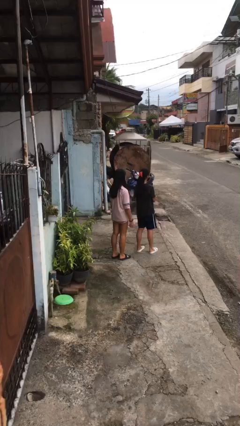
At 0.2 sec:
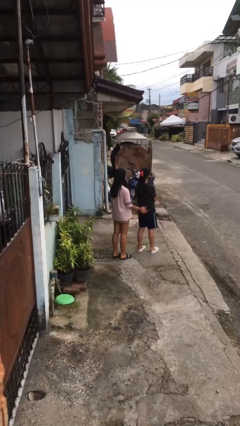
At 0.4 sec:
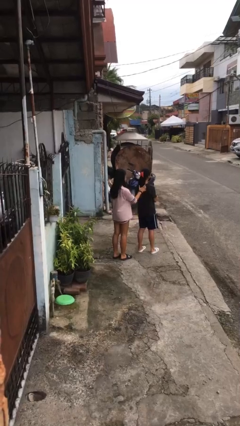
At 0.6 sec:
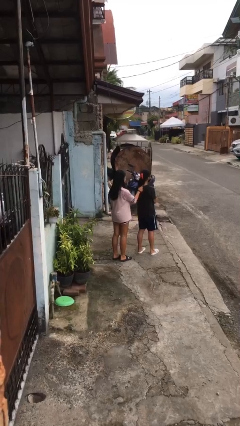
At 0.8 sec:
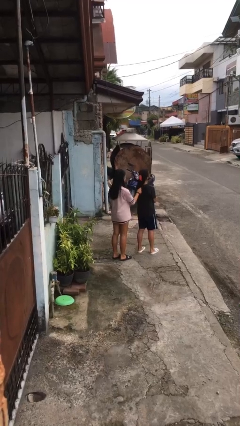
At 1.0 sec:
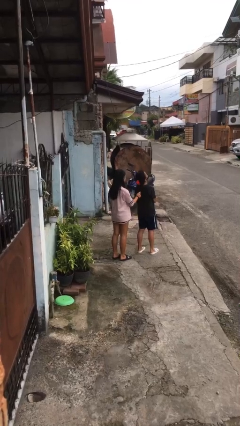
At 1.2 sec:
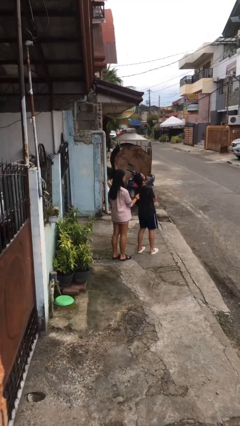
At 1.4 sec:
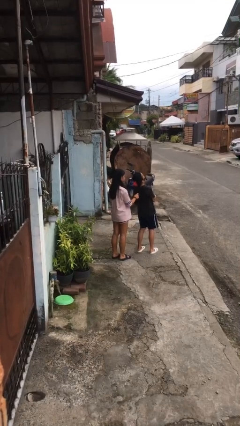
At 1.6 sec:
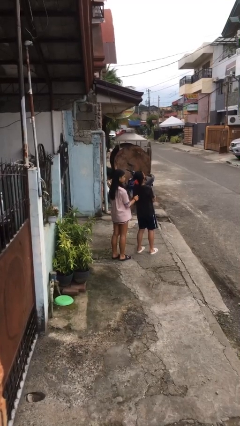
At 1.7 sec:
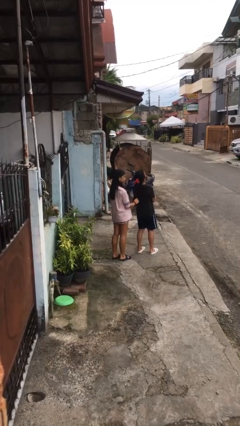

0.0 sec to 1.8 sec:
person grabs person by hair

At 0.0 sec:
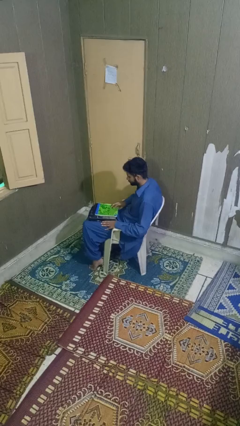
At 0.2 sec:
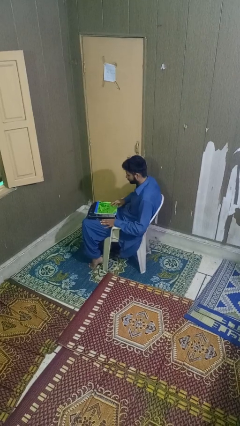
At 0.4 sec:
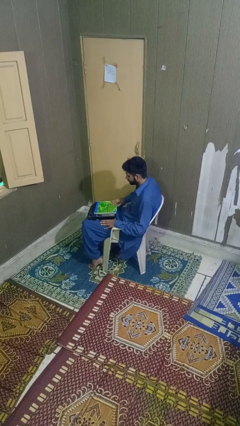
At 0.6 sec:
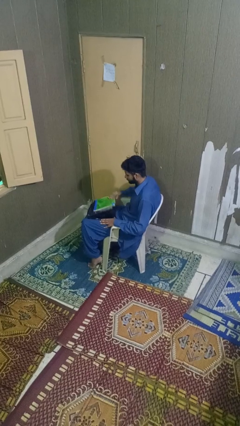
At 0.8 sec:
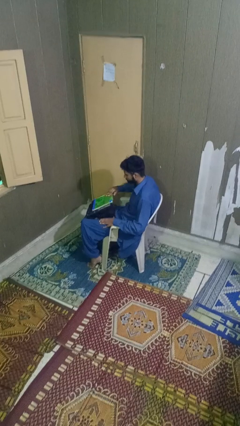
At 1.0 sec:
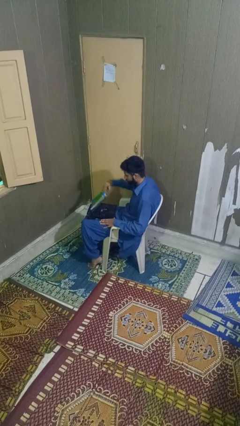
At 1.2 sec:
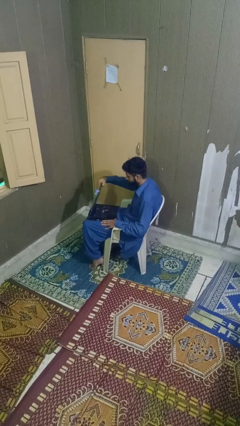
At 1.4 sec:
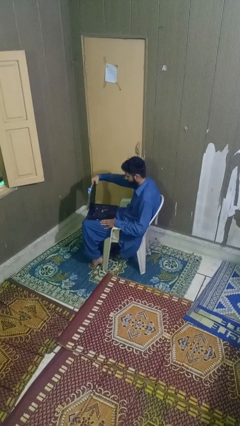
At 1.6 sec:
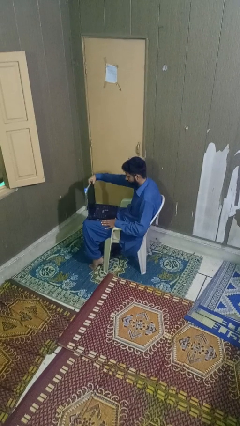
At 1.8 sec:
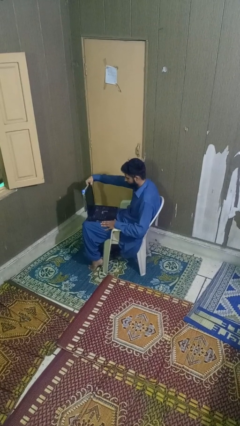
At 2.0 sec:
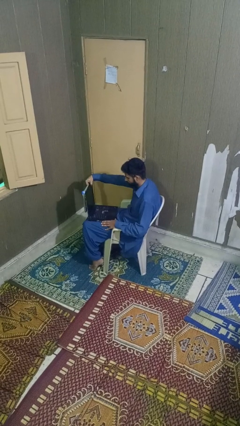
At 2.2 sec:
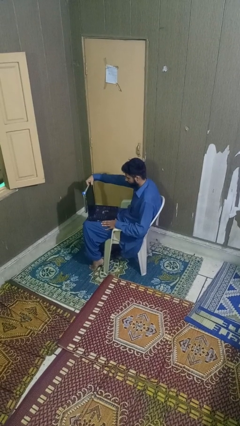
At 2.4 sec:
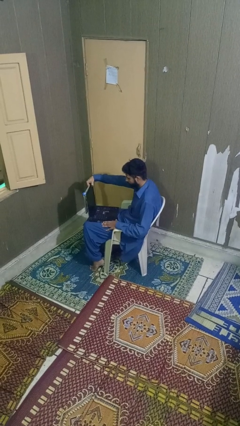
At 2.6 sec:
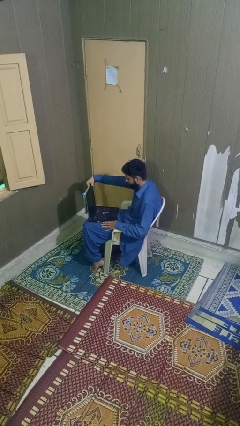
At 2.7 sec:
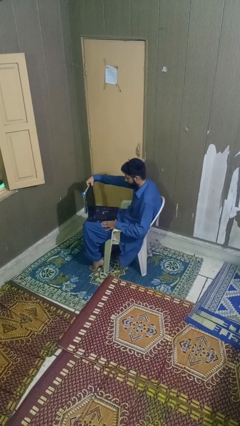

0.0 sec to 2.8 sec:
person opens laptop

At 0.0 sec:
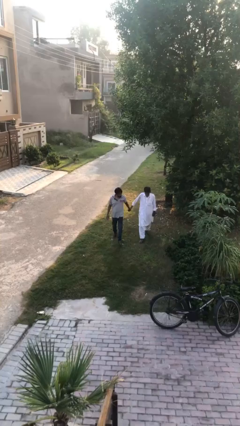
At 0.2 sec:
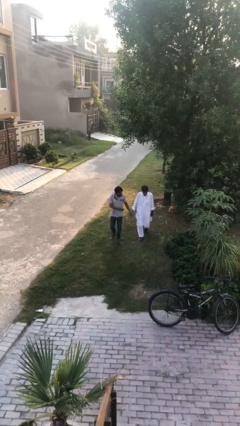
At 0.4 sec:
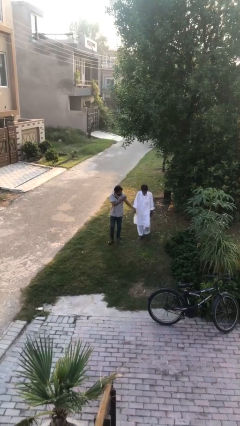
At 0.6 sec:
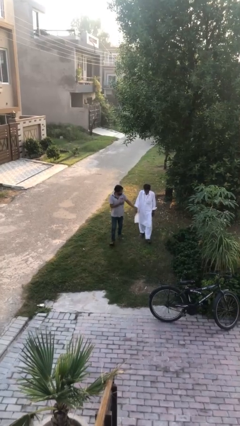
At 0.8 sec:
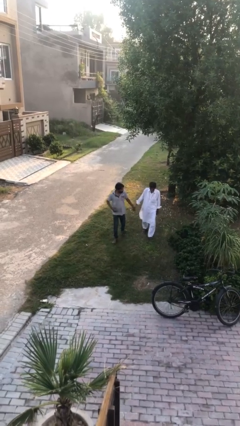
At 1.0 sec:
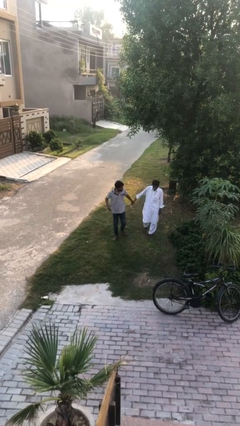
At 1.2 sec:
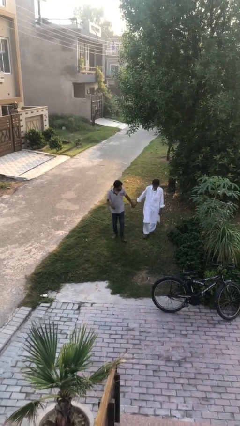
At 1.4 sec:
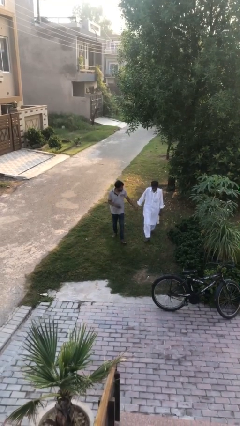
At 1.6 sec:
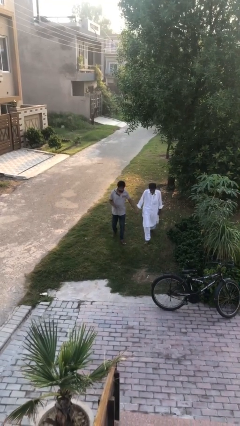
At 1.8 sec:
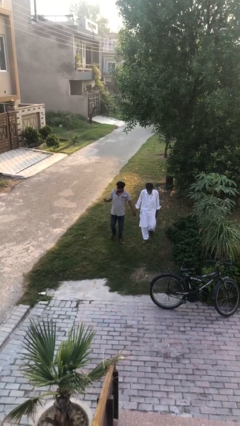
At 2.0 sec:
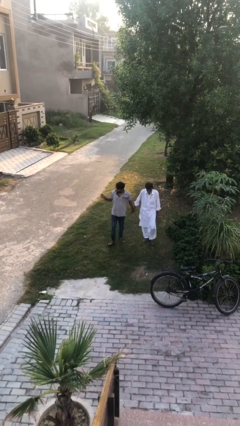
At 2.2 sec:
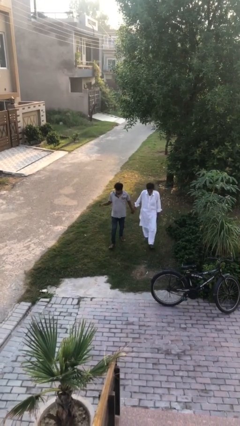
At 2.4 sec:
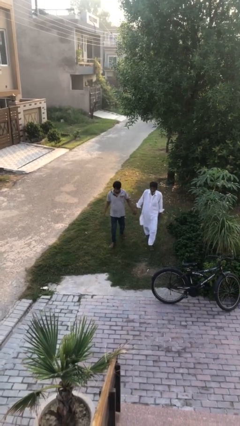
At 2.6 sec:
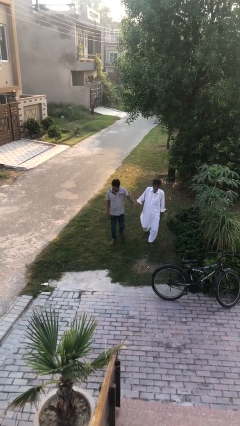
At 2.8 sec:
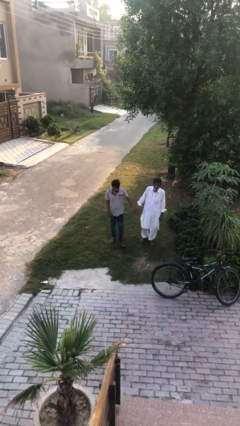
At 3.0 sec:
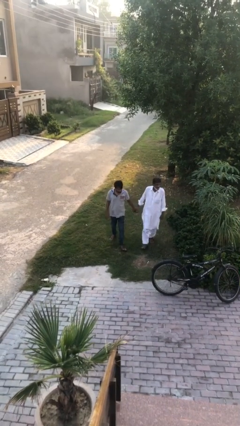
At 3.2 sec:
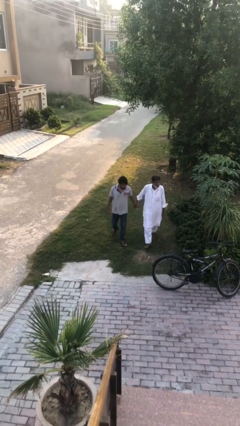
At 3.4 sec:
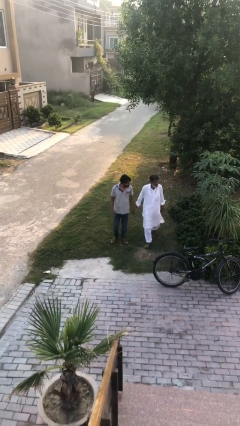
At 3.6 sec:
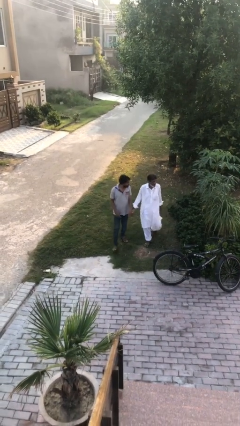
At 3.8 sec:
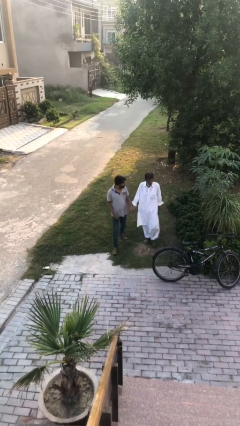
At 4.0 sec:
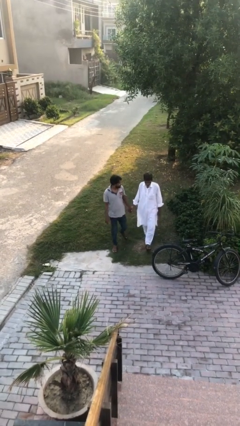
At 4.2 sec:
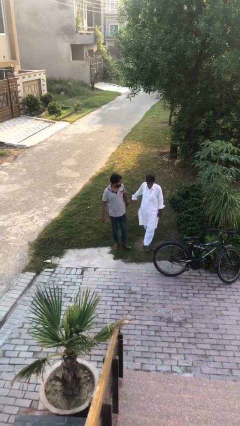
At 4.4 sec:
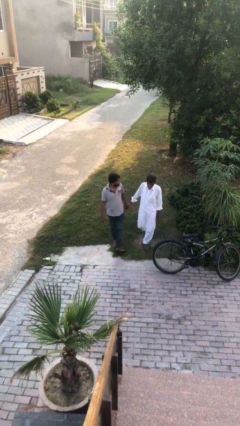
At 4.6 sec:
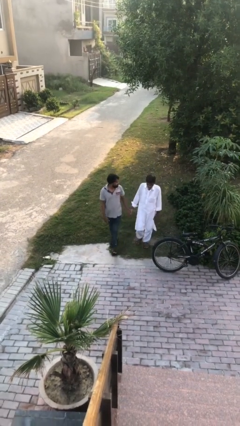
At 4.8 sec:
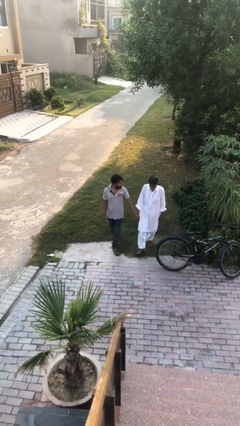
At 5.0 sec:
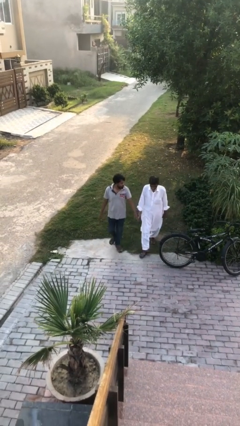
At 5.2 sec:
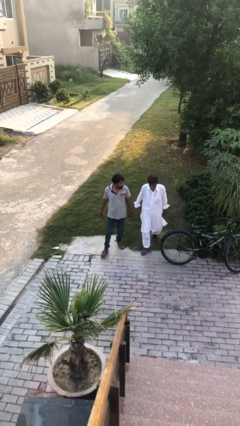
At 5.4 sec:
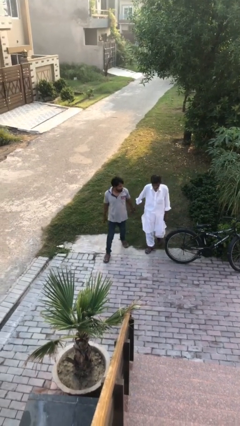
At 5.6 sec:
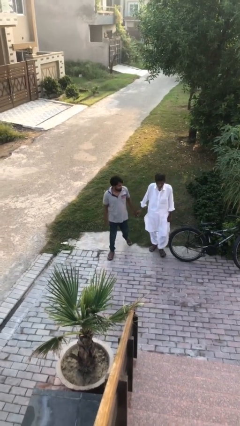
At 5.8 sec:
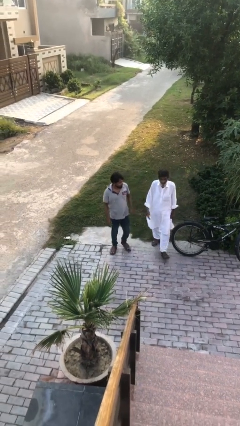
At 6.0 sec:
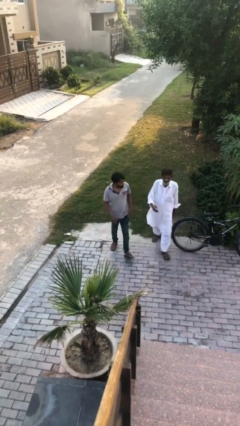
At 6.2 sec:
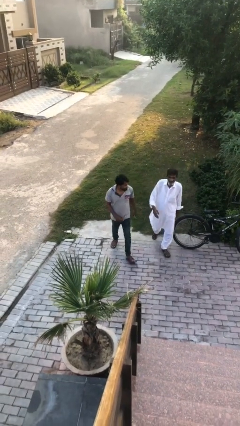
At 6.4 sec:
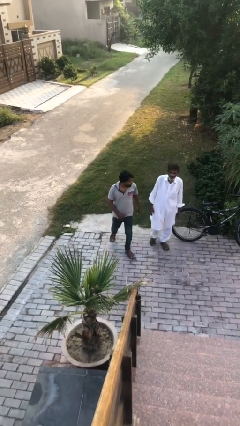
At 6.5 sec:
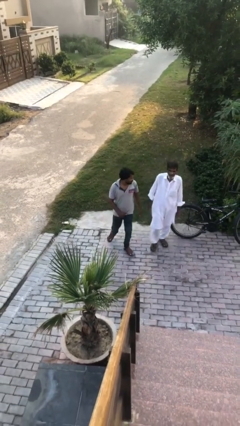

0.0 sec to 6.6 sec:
person holds hand

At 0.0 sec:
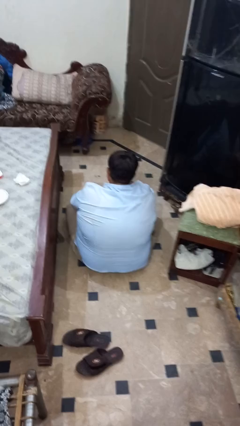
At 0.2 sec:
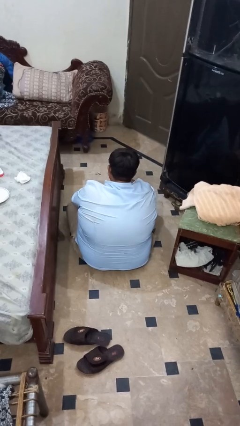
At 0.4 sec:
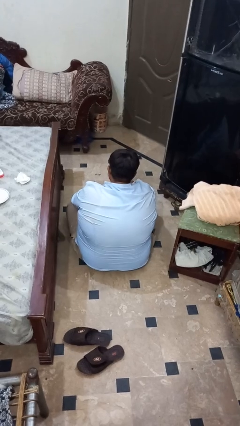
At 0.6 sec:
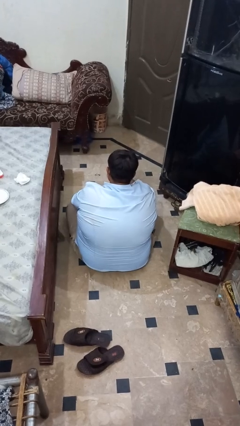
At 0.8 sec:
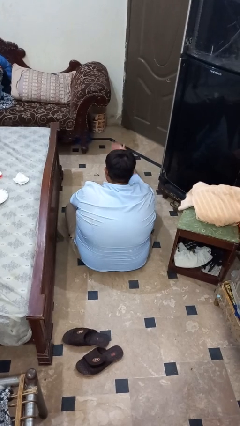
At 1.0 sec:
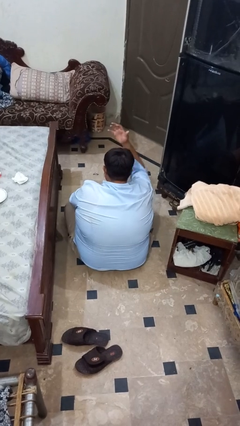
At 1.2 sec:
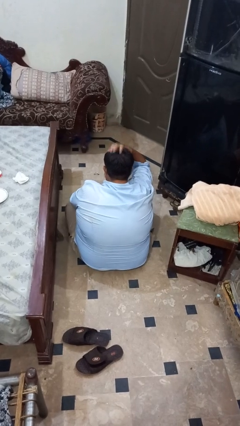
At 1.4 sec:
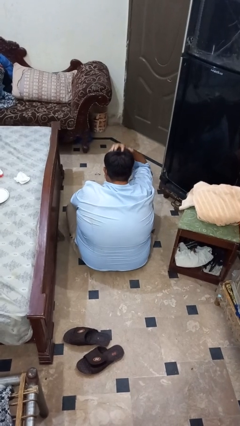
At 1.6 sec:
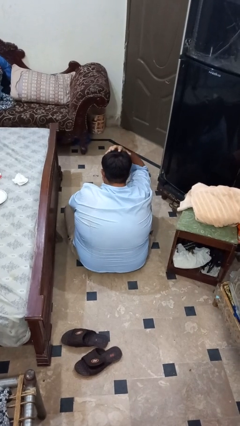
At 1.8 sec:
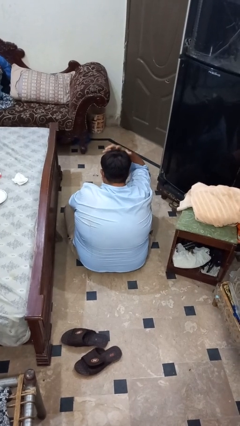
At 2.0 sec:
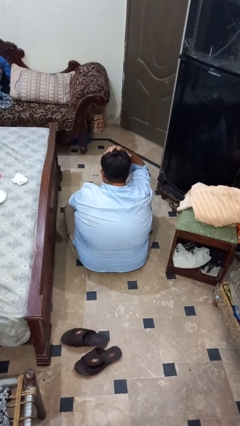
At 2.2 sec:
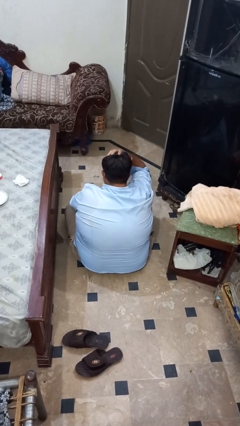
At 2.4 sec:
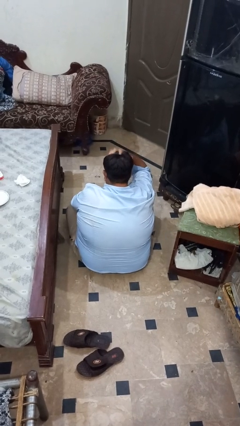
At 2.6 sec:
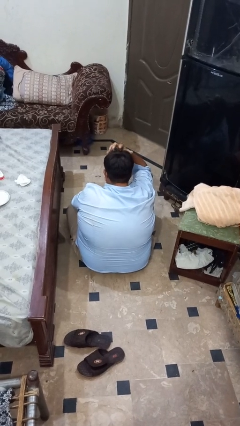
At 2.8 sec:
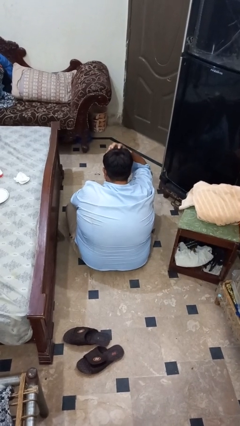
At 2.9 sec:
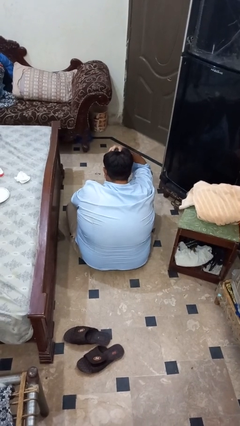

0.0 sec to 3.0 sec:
person pats head

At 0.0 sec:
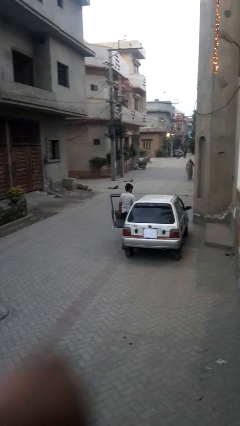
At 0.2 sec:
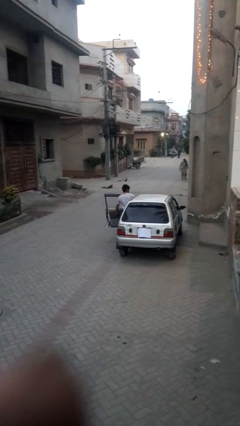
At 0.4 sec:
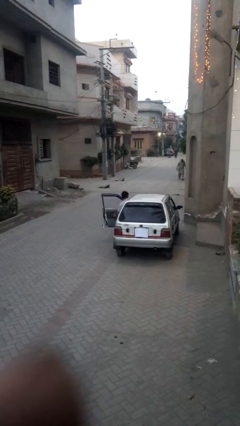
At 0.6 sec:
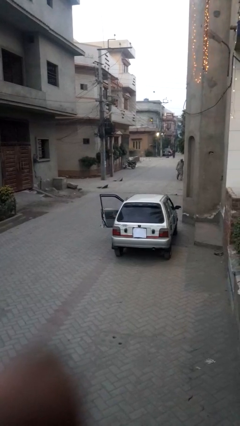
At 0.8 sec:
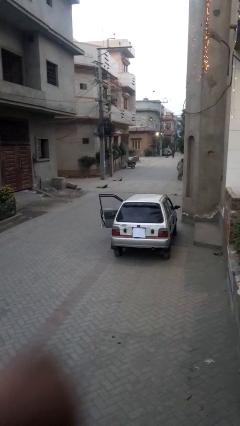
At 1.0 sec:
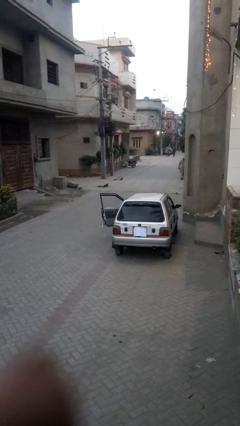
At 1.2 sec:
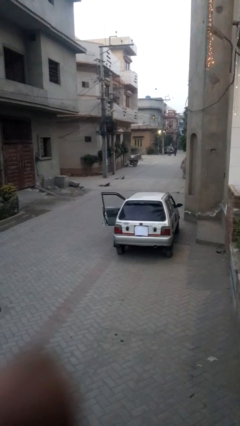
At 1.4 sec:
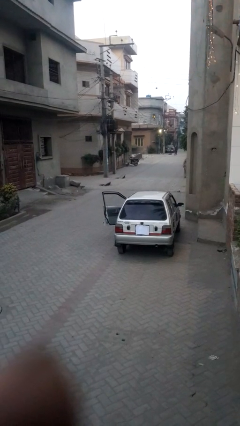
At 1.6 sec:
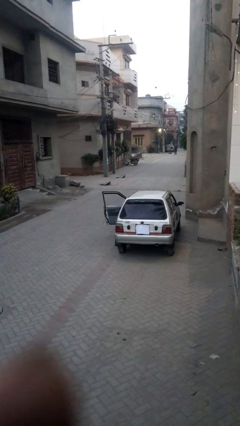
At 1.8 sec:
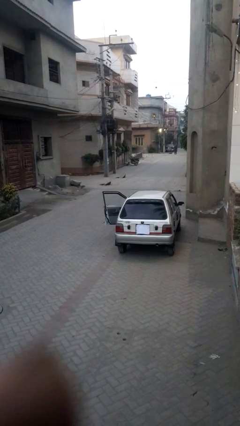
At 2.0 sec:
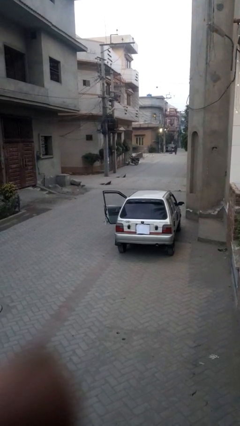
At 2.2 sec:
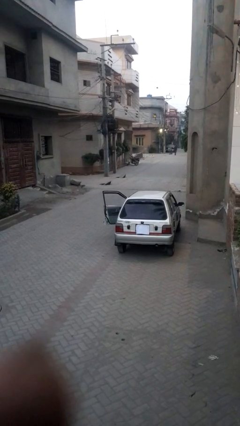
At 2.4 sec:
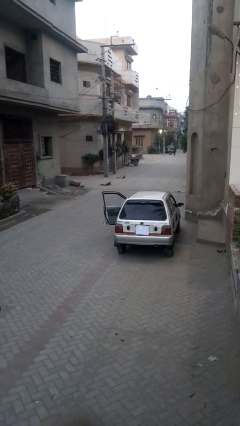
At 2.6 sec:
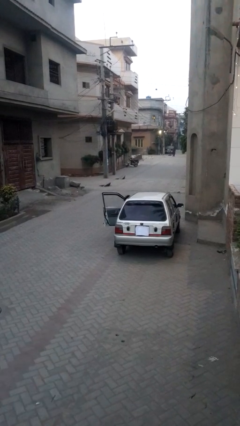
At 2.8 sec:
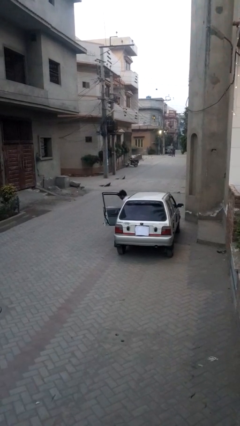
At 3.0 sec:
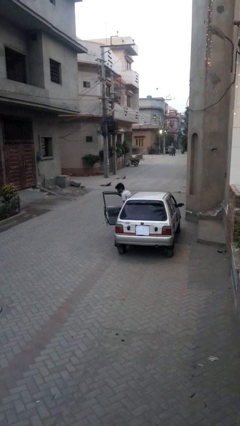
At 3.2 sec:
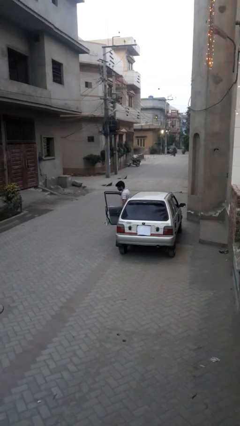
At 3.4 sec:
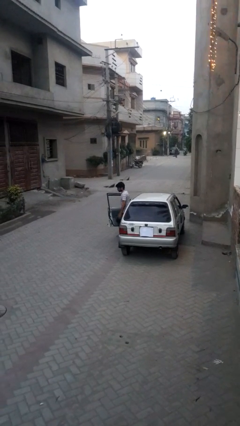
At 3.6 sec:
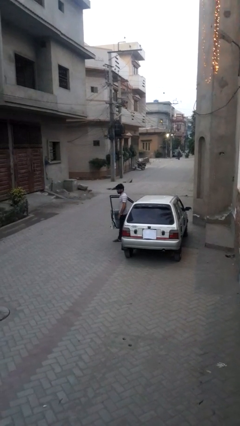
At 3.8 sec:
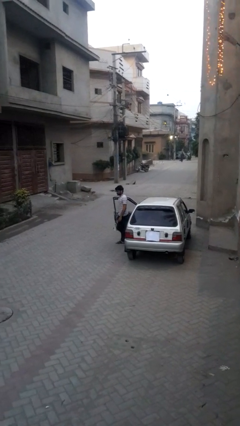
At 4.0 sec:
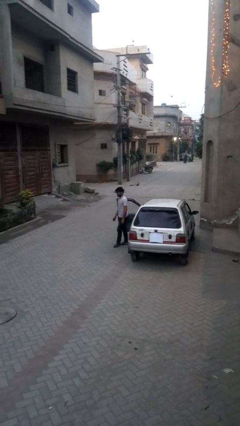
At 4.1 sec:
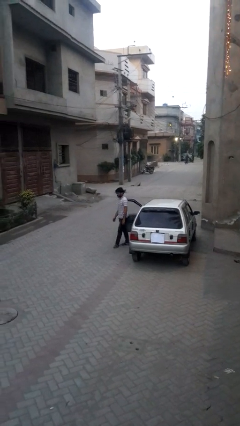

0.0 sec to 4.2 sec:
person enters car
